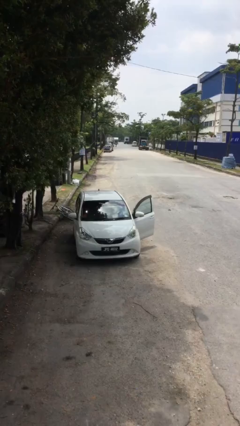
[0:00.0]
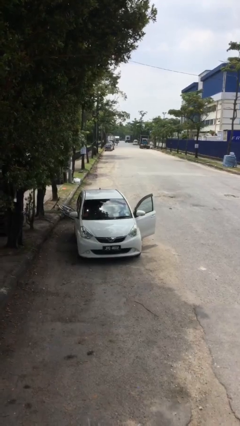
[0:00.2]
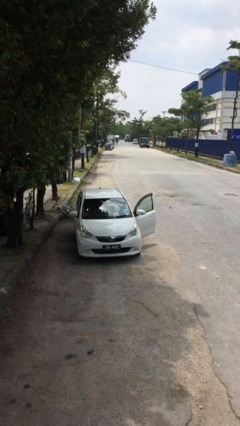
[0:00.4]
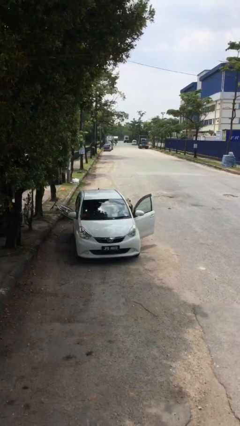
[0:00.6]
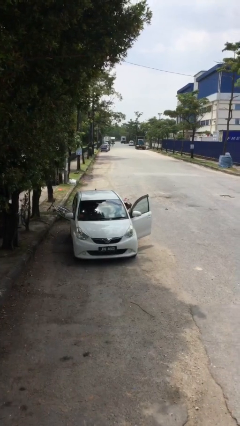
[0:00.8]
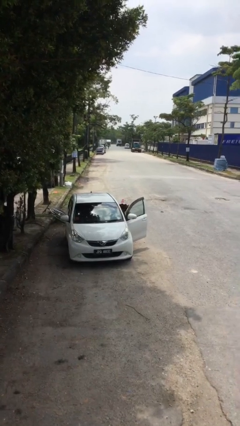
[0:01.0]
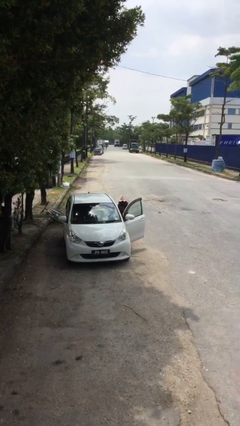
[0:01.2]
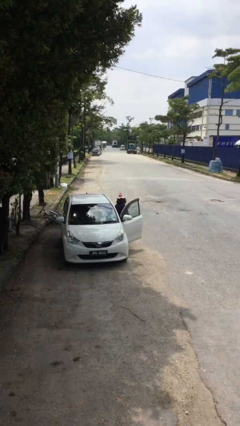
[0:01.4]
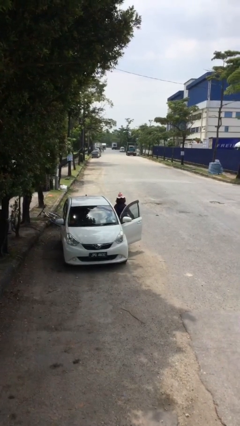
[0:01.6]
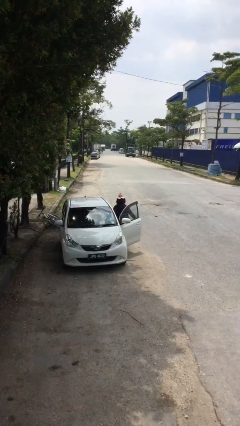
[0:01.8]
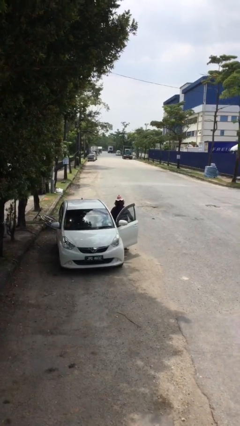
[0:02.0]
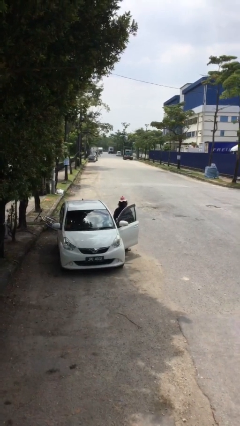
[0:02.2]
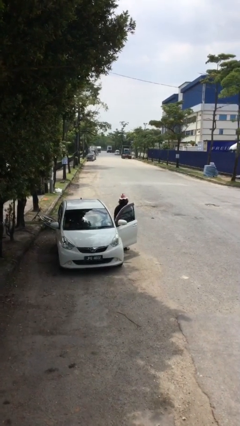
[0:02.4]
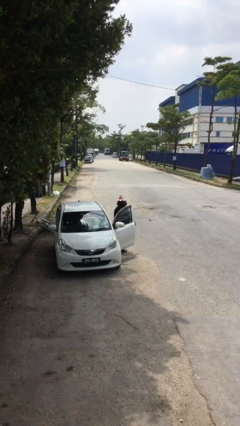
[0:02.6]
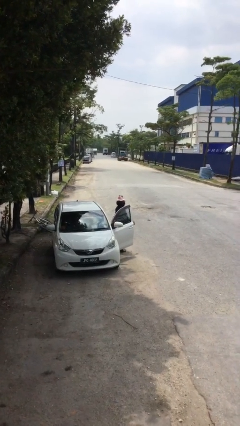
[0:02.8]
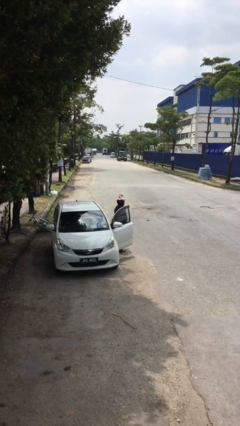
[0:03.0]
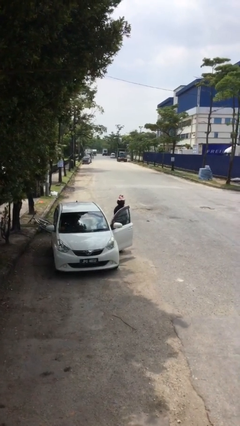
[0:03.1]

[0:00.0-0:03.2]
person exits car

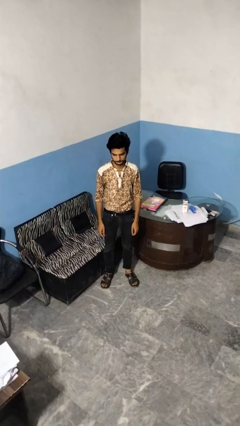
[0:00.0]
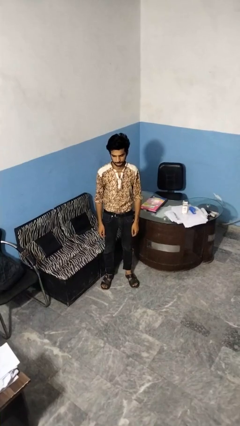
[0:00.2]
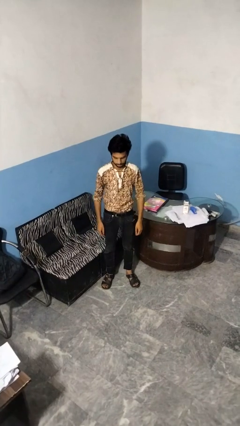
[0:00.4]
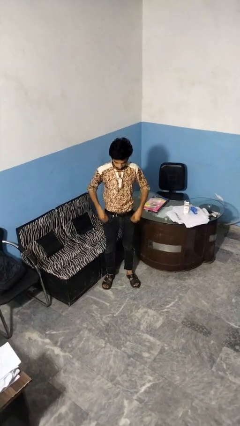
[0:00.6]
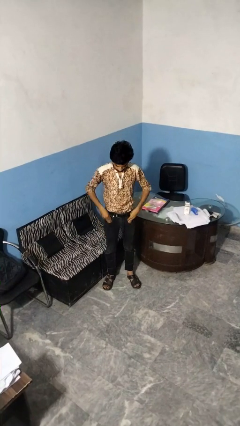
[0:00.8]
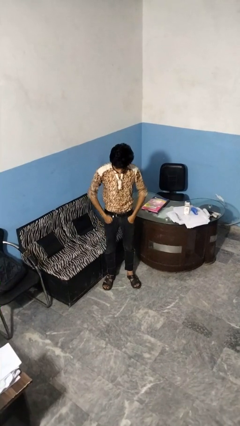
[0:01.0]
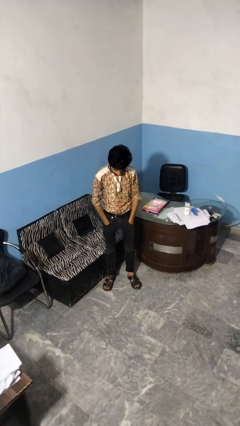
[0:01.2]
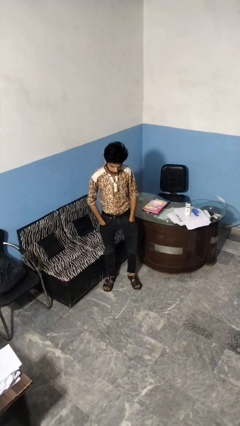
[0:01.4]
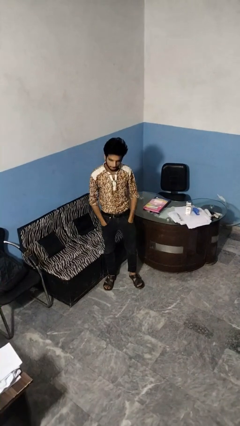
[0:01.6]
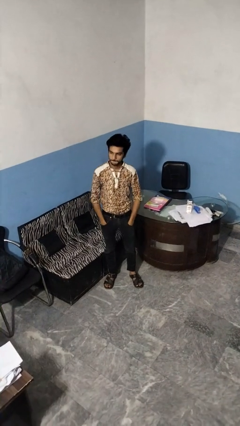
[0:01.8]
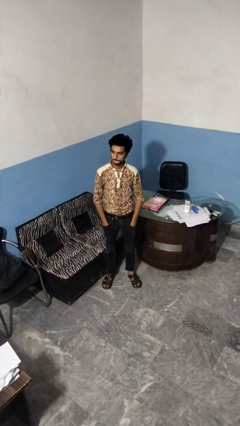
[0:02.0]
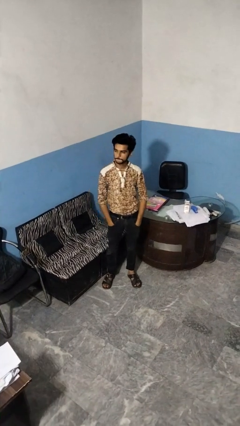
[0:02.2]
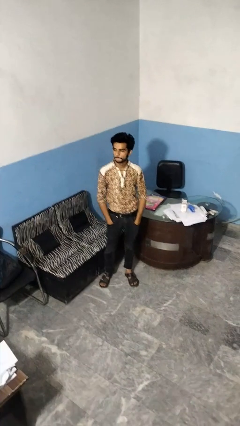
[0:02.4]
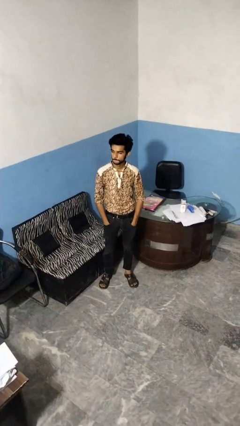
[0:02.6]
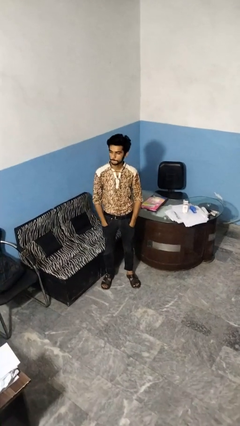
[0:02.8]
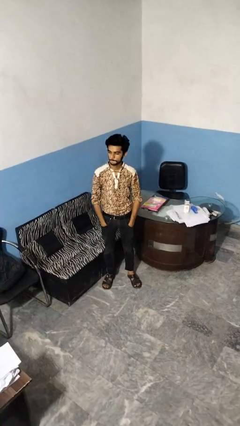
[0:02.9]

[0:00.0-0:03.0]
person puts hands in back pockets

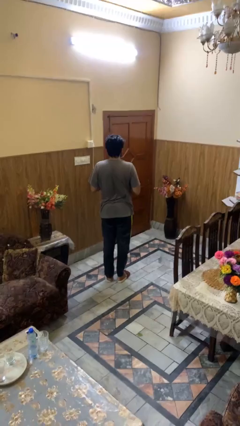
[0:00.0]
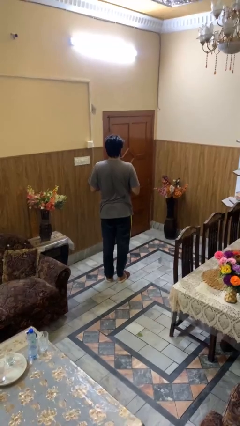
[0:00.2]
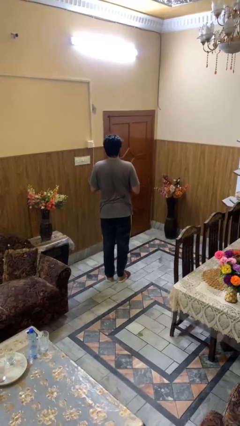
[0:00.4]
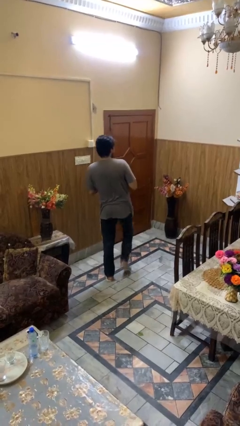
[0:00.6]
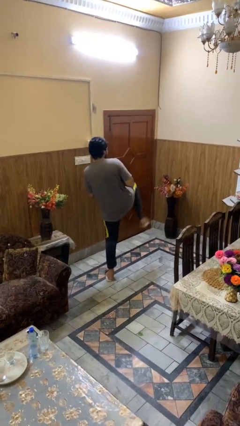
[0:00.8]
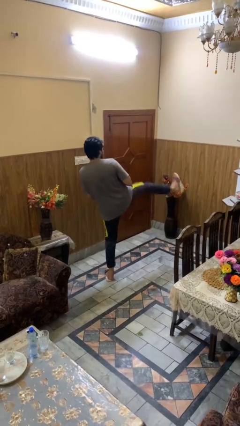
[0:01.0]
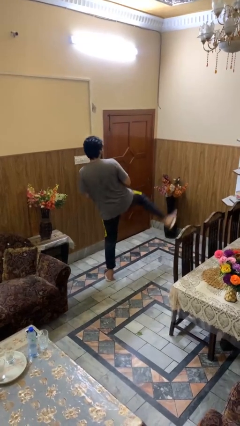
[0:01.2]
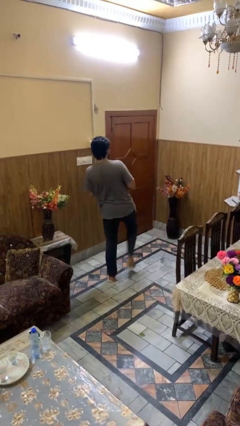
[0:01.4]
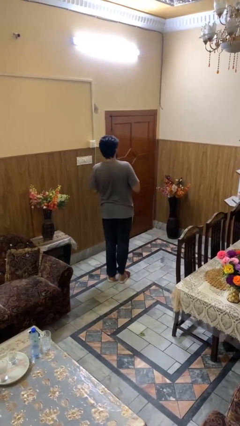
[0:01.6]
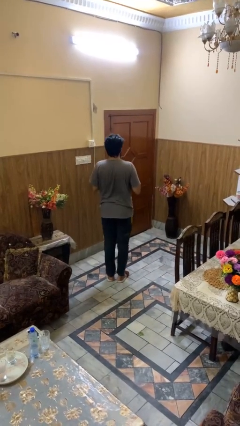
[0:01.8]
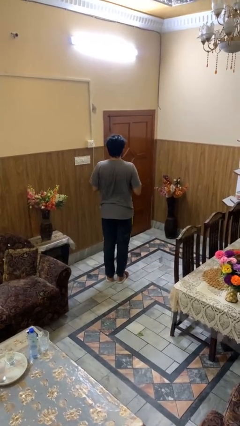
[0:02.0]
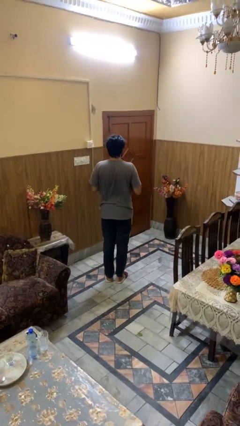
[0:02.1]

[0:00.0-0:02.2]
person karate kicks

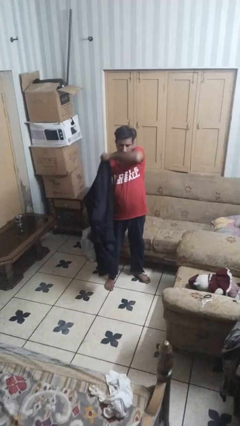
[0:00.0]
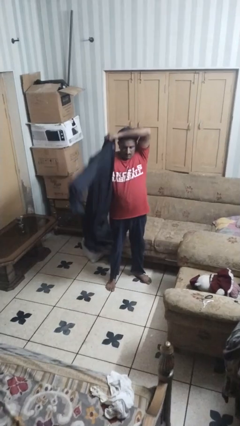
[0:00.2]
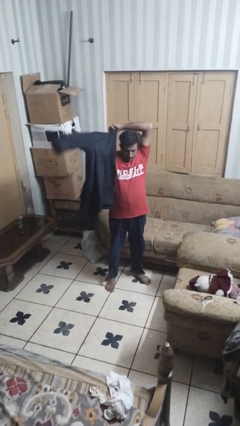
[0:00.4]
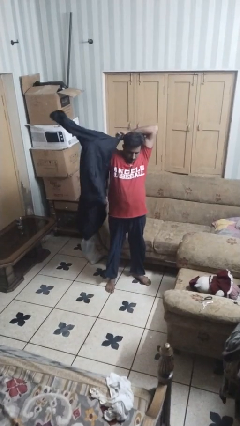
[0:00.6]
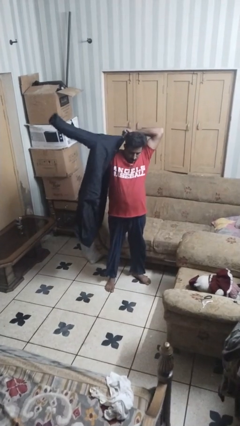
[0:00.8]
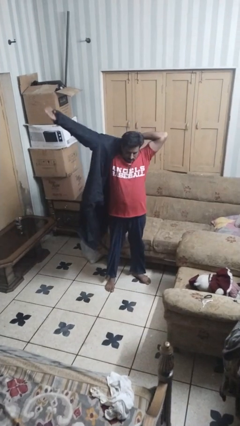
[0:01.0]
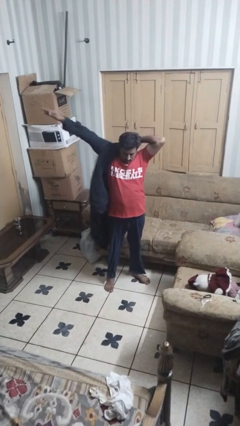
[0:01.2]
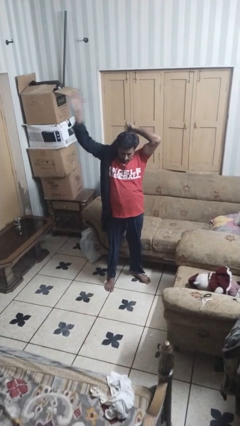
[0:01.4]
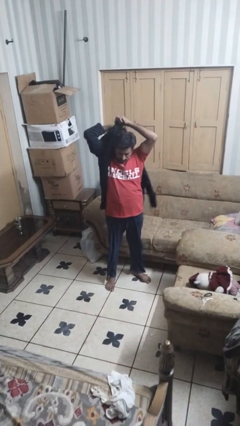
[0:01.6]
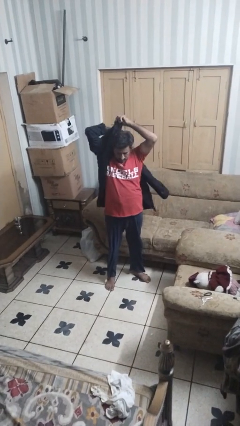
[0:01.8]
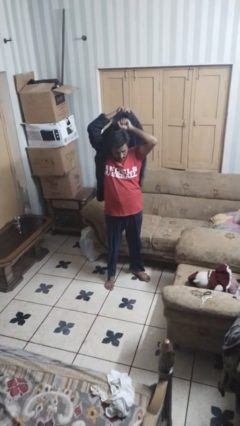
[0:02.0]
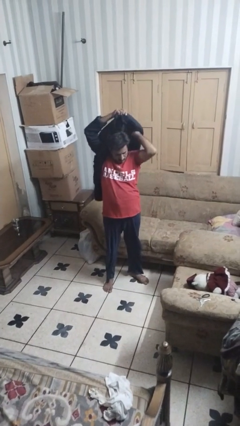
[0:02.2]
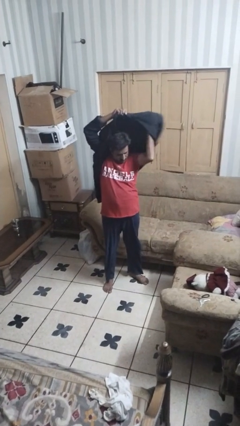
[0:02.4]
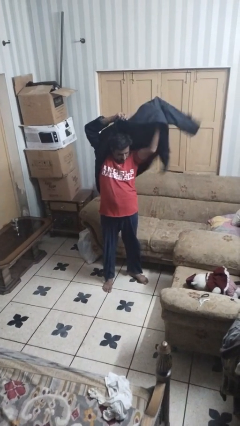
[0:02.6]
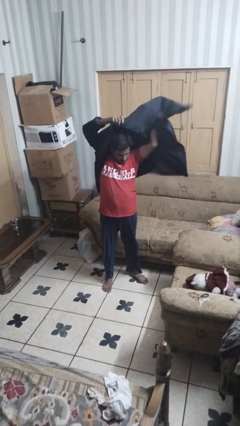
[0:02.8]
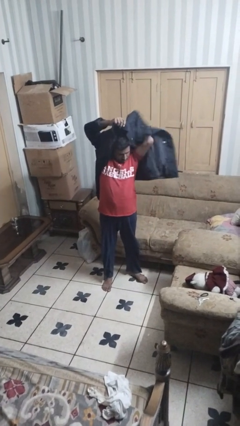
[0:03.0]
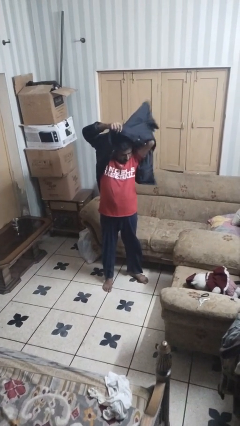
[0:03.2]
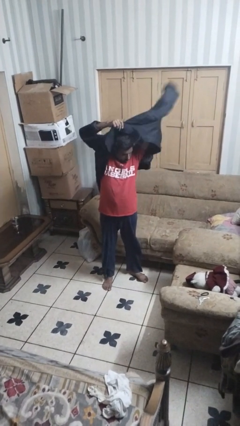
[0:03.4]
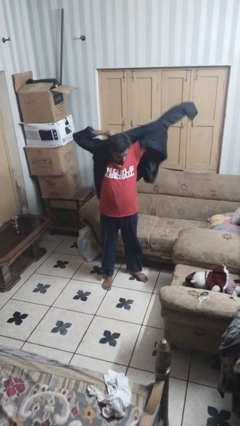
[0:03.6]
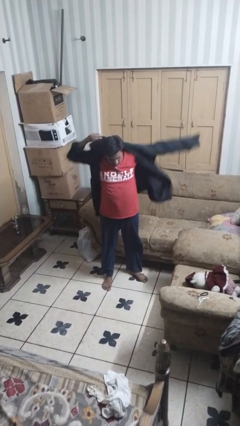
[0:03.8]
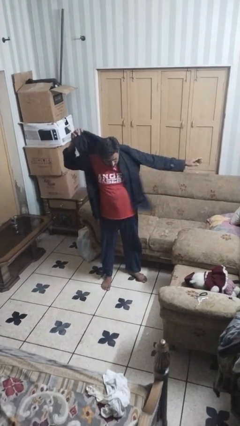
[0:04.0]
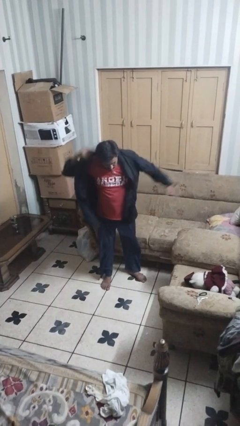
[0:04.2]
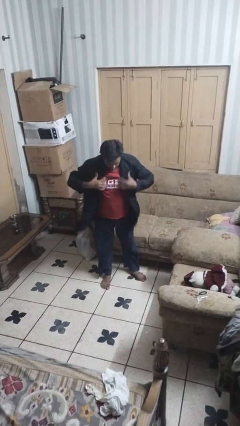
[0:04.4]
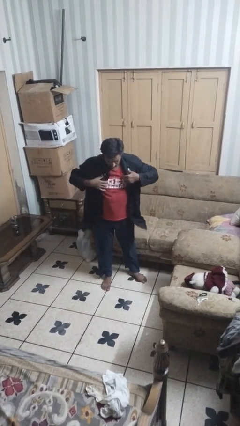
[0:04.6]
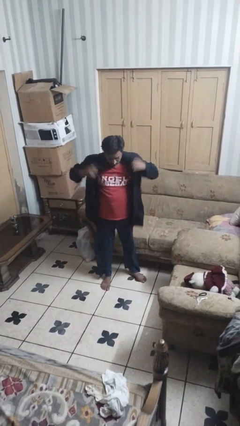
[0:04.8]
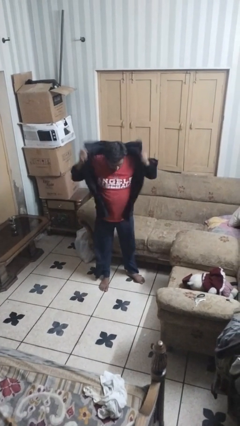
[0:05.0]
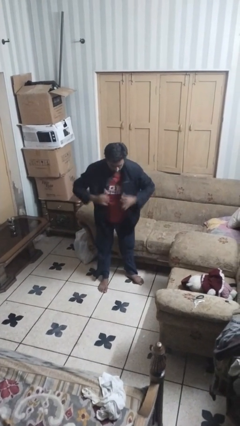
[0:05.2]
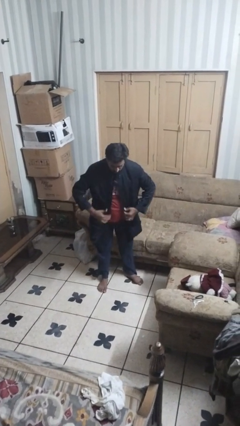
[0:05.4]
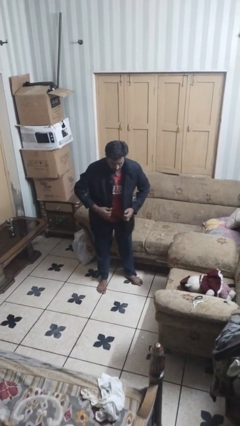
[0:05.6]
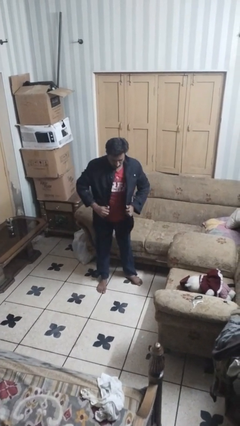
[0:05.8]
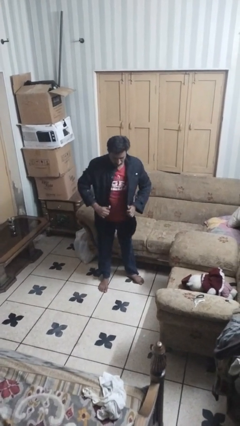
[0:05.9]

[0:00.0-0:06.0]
person puts on jacket

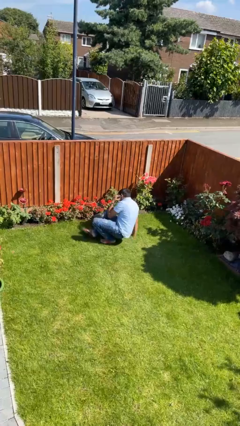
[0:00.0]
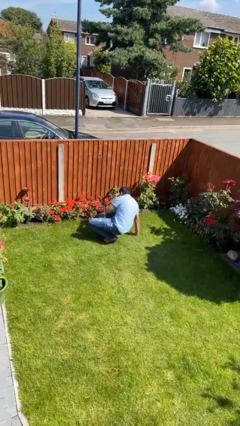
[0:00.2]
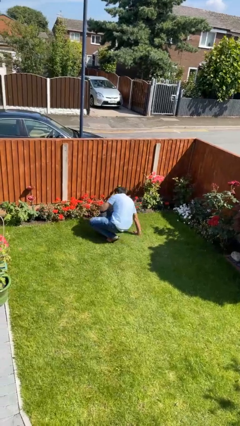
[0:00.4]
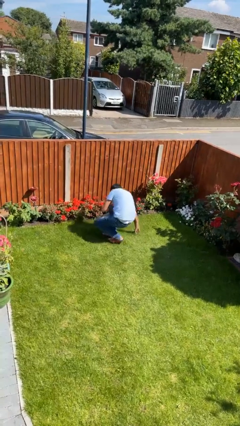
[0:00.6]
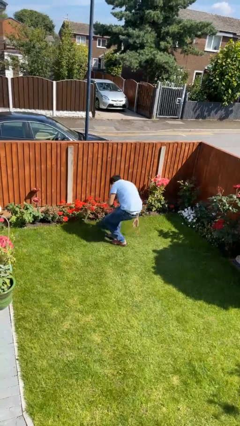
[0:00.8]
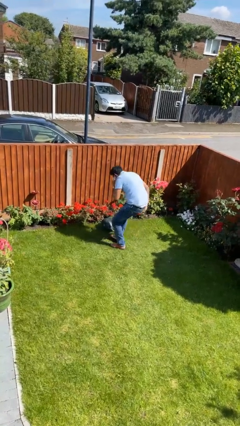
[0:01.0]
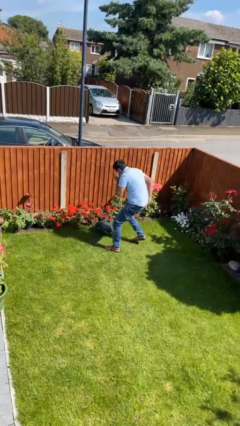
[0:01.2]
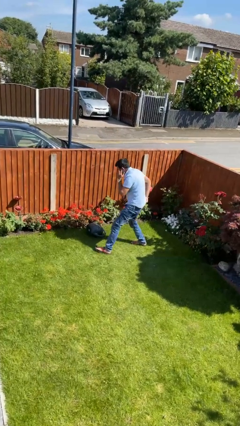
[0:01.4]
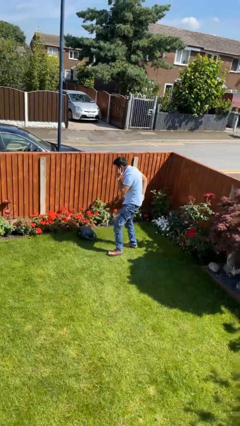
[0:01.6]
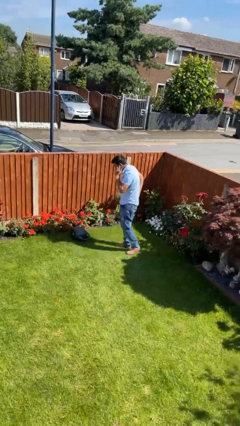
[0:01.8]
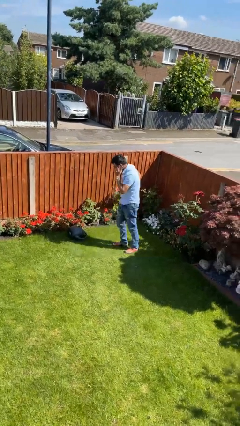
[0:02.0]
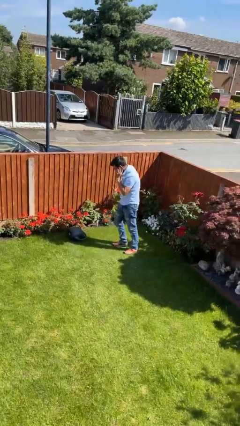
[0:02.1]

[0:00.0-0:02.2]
person stands up from floor

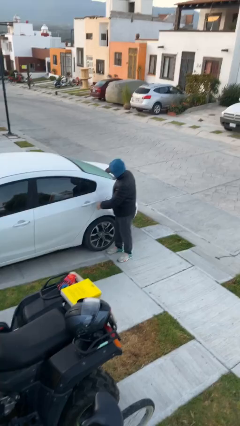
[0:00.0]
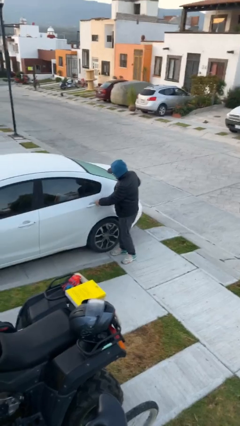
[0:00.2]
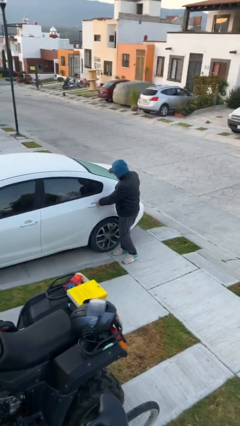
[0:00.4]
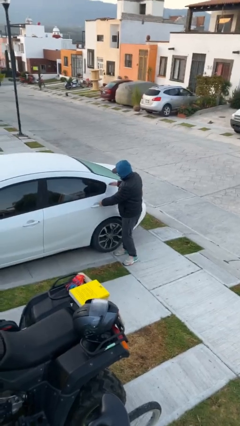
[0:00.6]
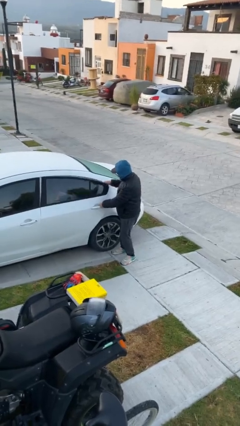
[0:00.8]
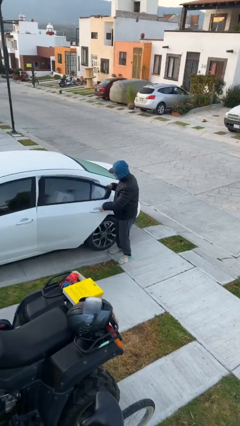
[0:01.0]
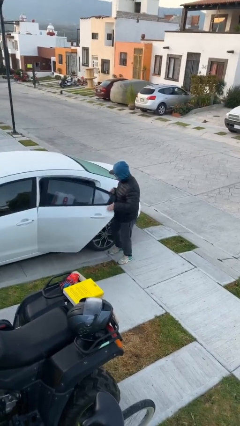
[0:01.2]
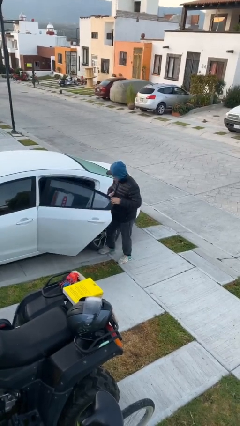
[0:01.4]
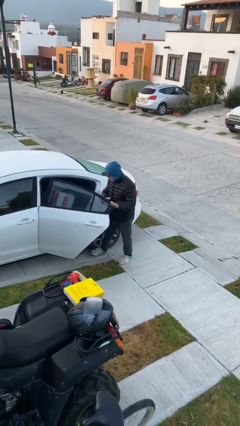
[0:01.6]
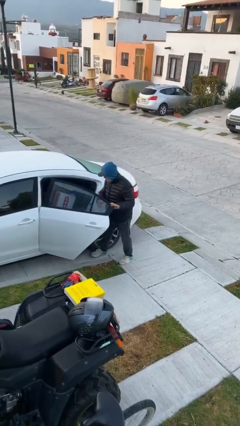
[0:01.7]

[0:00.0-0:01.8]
person opens car door
